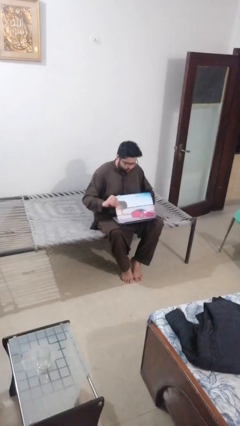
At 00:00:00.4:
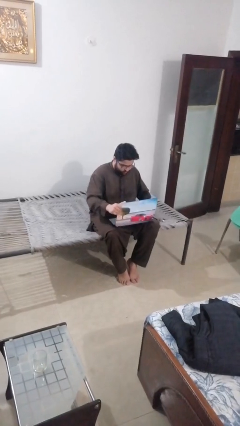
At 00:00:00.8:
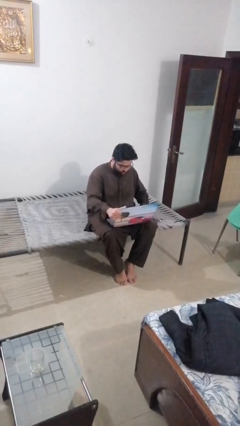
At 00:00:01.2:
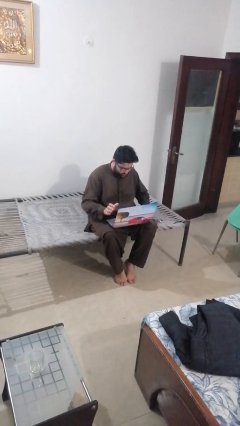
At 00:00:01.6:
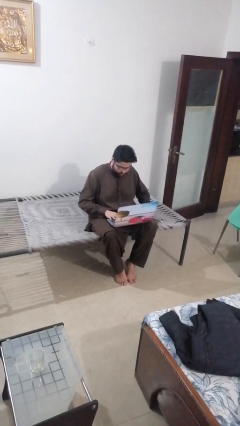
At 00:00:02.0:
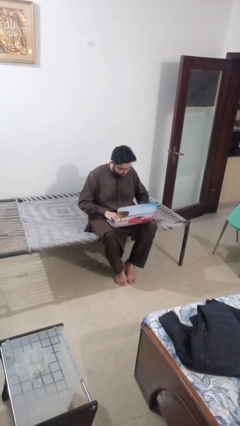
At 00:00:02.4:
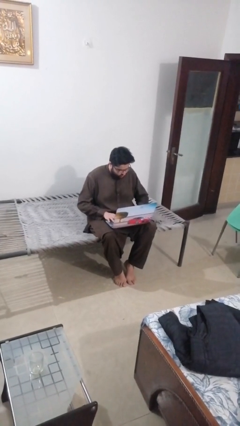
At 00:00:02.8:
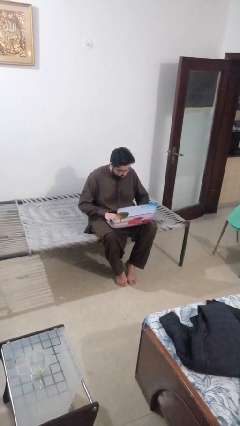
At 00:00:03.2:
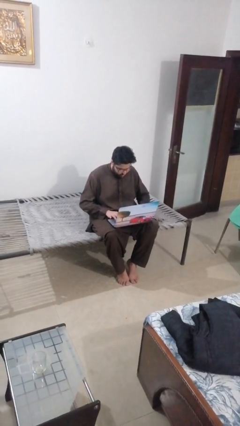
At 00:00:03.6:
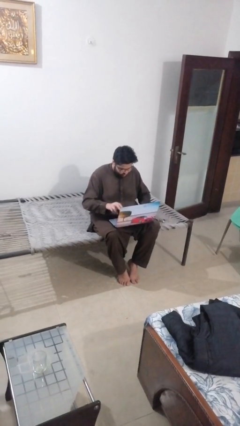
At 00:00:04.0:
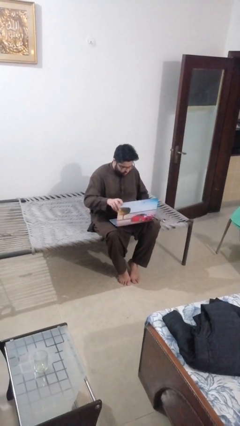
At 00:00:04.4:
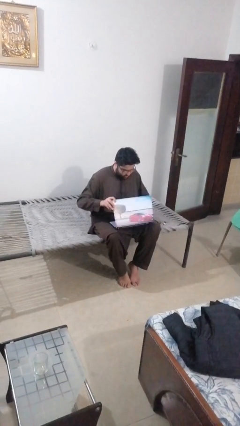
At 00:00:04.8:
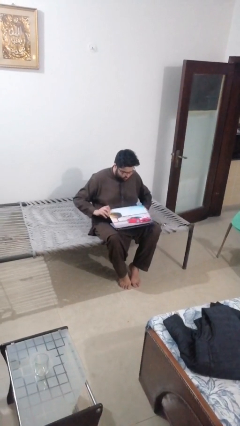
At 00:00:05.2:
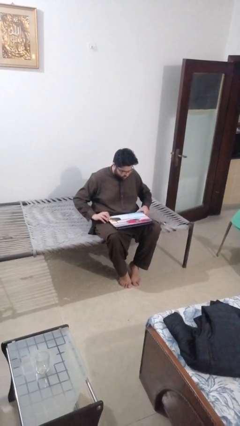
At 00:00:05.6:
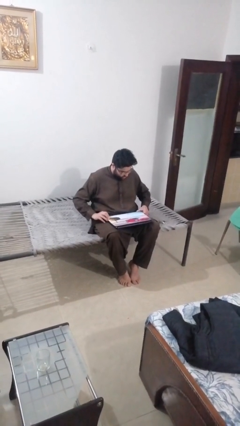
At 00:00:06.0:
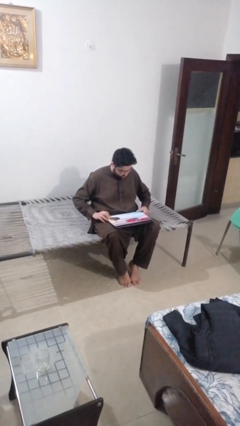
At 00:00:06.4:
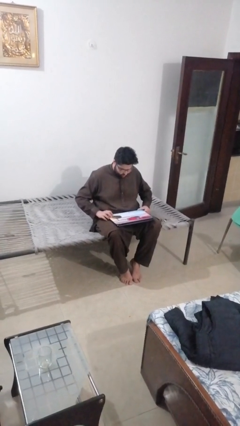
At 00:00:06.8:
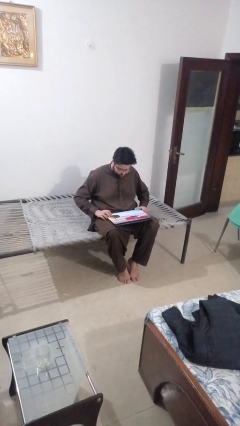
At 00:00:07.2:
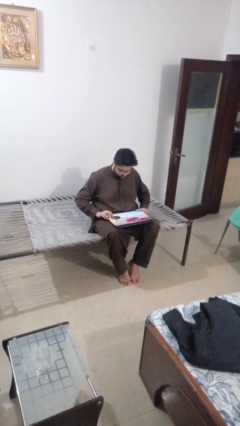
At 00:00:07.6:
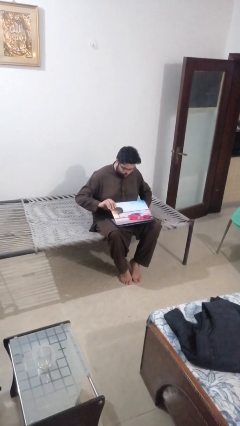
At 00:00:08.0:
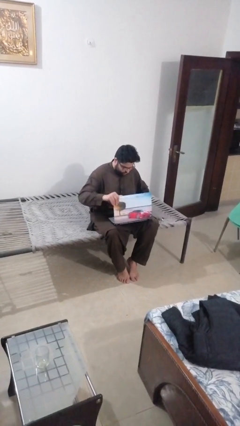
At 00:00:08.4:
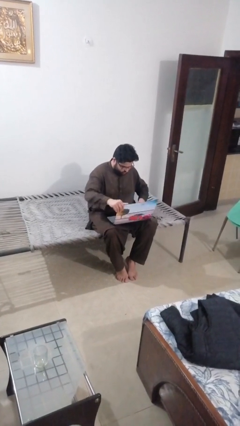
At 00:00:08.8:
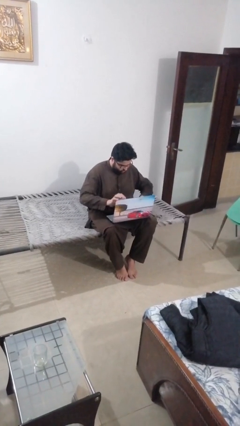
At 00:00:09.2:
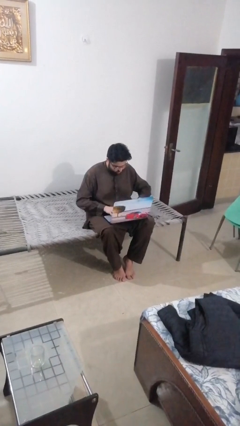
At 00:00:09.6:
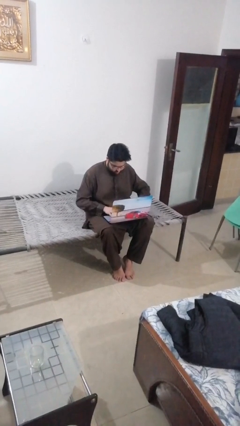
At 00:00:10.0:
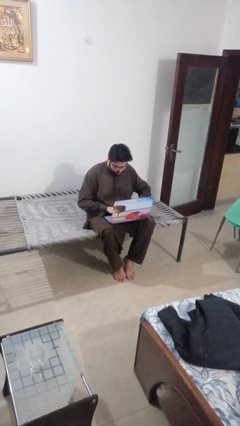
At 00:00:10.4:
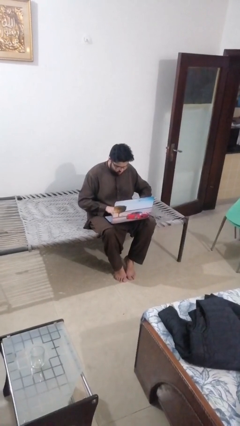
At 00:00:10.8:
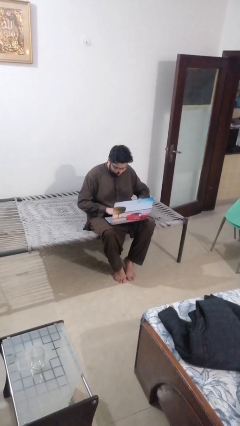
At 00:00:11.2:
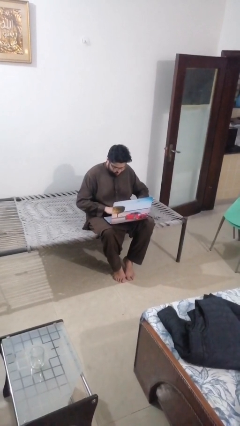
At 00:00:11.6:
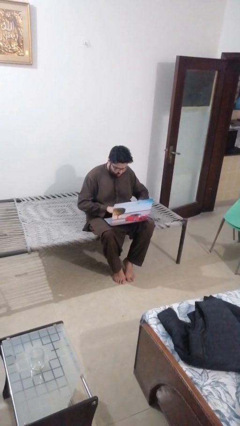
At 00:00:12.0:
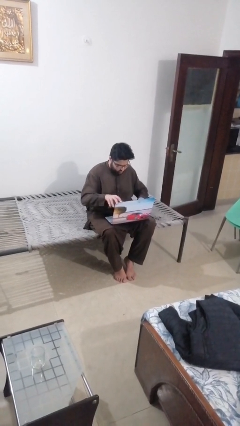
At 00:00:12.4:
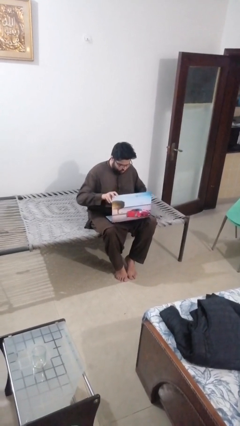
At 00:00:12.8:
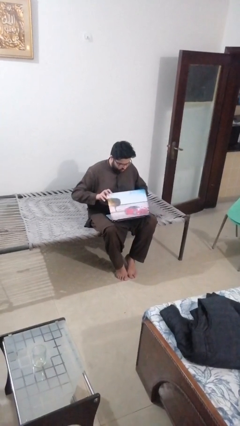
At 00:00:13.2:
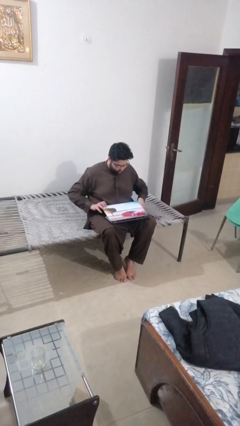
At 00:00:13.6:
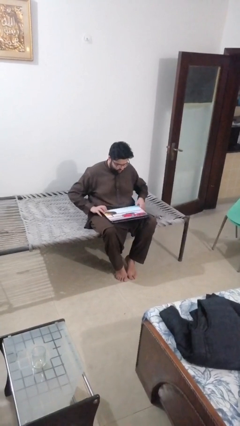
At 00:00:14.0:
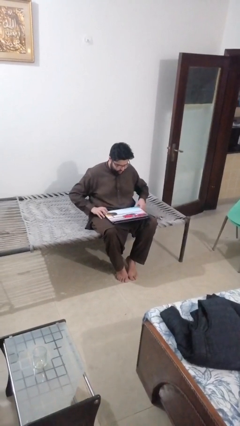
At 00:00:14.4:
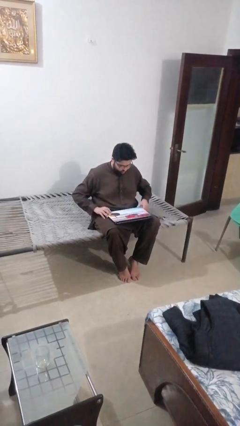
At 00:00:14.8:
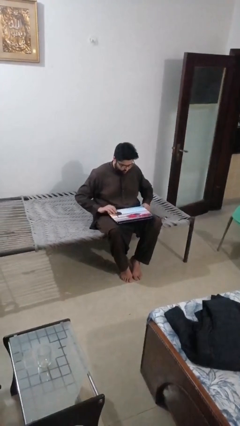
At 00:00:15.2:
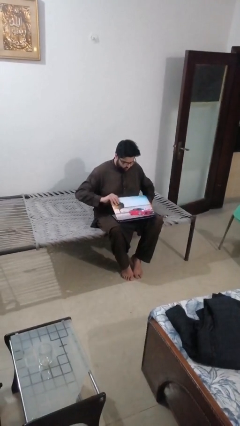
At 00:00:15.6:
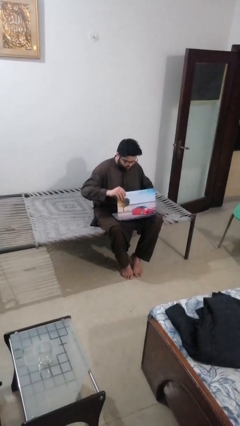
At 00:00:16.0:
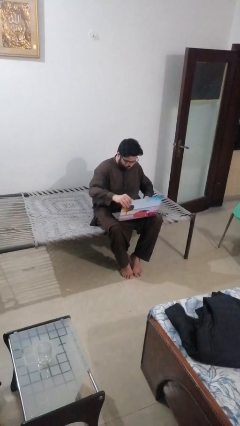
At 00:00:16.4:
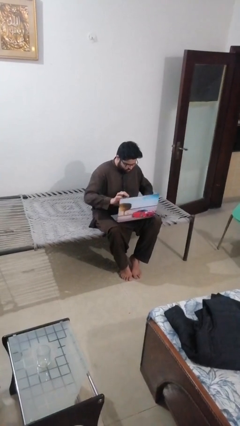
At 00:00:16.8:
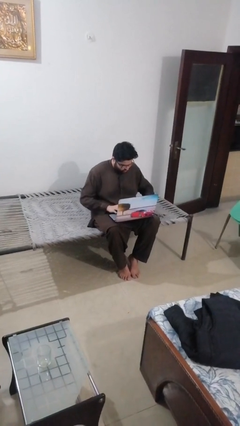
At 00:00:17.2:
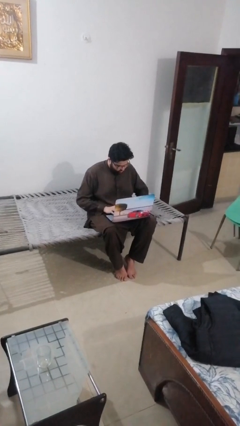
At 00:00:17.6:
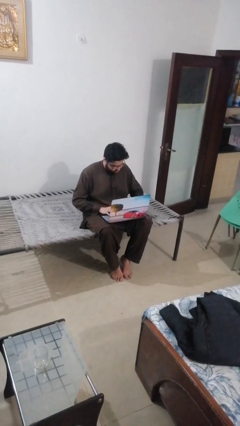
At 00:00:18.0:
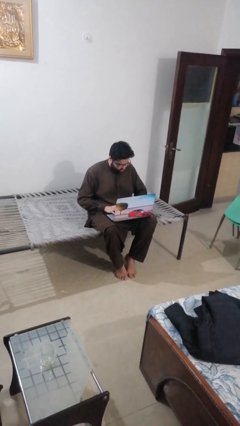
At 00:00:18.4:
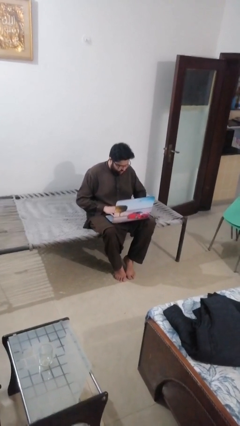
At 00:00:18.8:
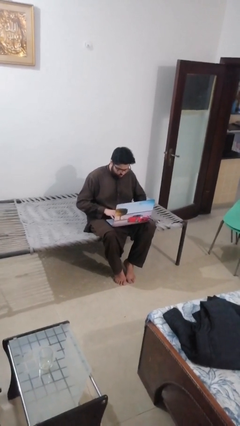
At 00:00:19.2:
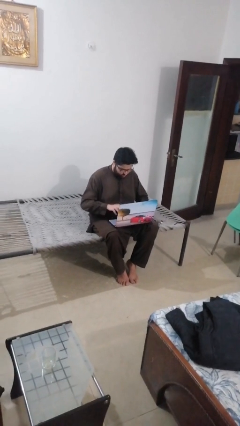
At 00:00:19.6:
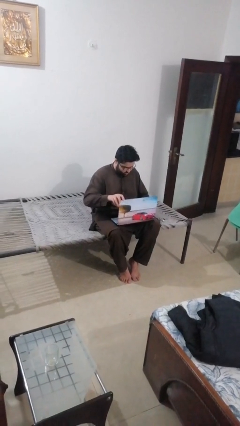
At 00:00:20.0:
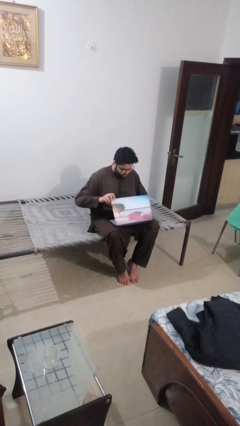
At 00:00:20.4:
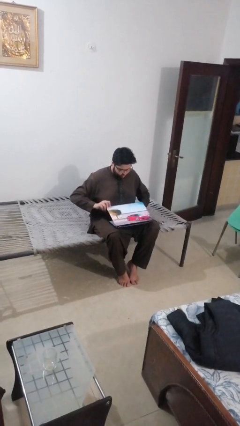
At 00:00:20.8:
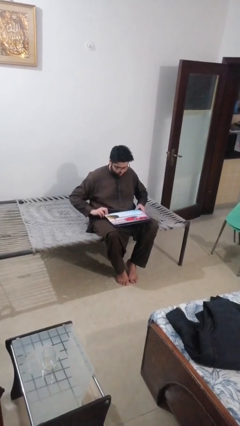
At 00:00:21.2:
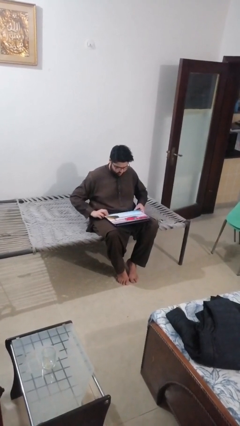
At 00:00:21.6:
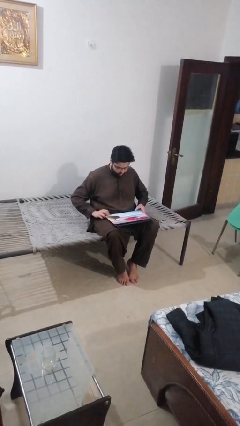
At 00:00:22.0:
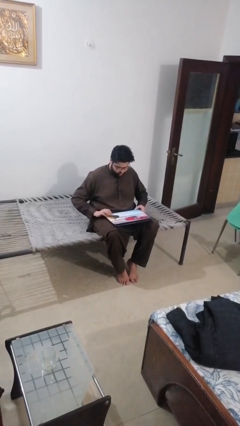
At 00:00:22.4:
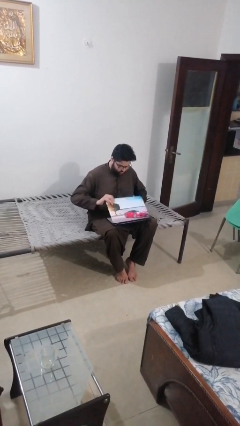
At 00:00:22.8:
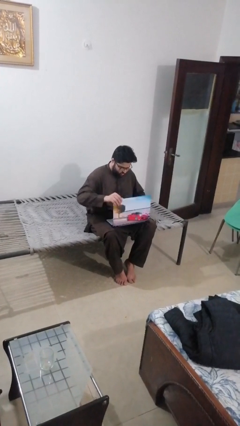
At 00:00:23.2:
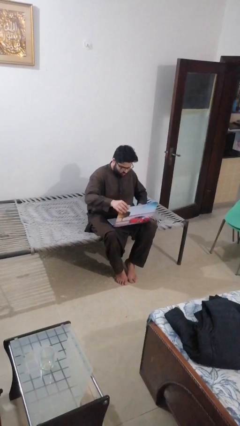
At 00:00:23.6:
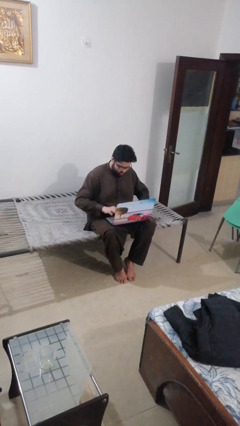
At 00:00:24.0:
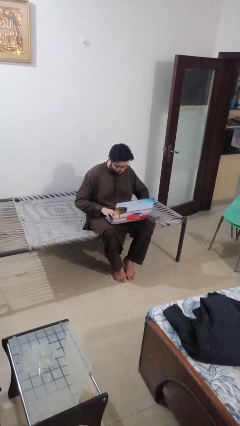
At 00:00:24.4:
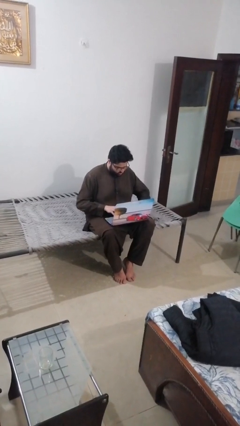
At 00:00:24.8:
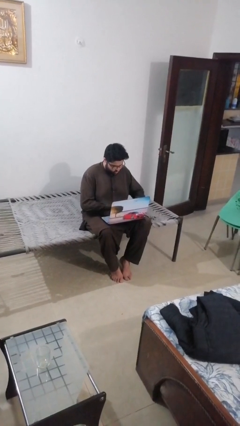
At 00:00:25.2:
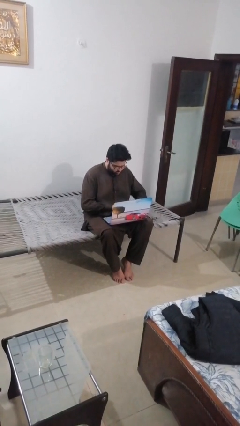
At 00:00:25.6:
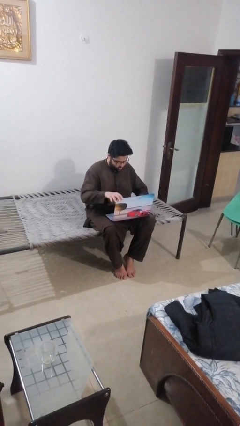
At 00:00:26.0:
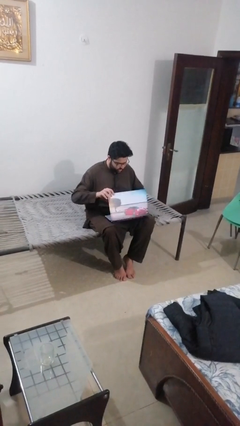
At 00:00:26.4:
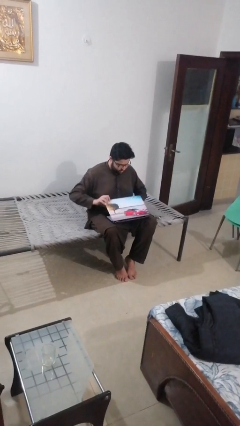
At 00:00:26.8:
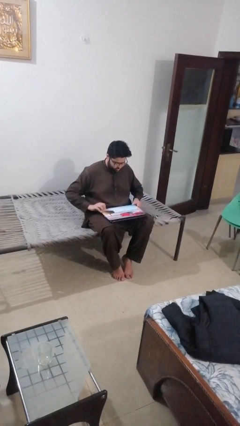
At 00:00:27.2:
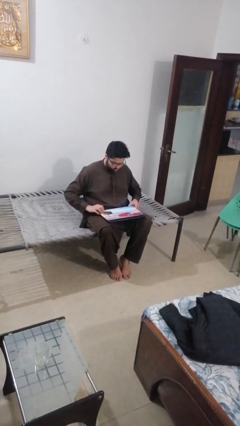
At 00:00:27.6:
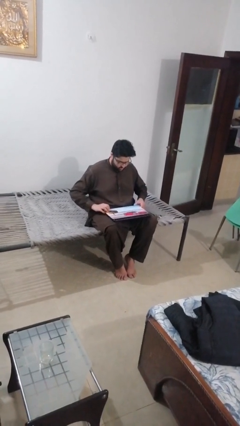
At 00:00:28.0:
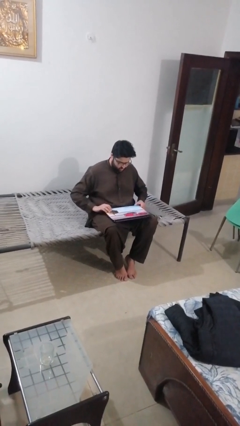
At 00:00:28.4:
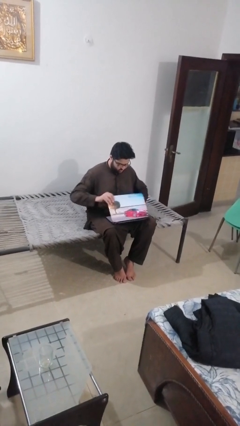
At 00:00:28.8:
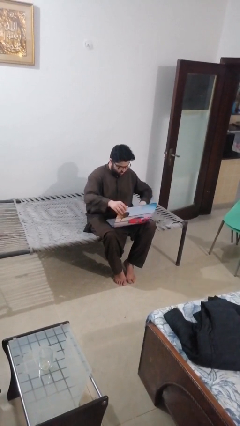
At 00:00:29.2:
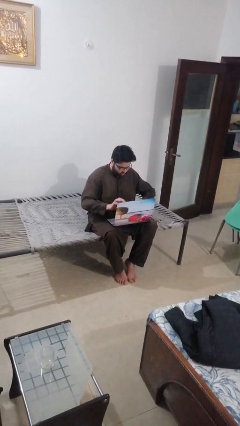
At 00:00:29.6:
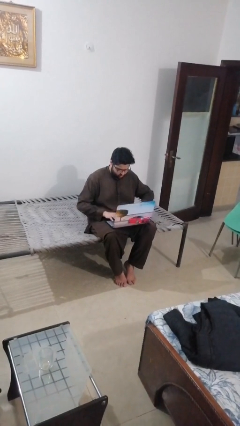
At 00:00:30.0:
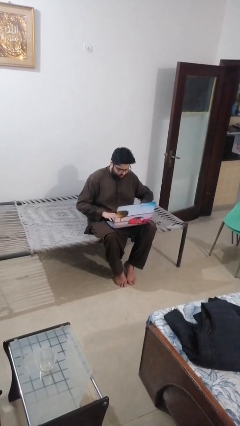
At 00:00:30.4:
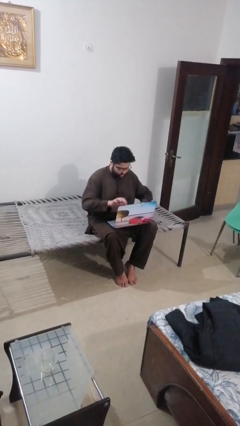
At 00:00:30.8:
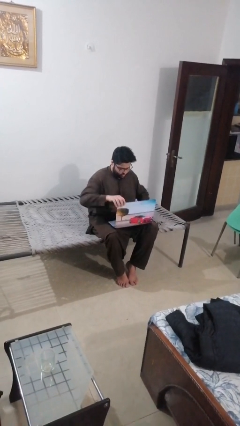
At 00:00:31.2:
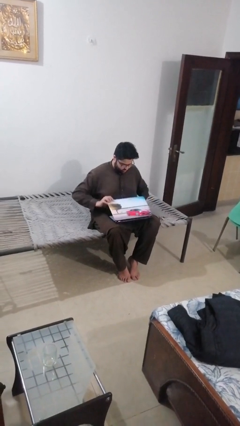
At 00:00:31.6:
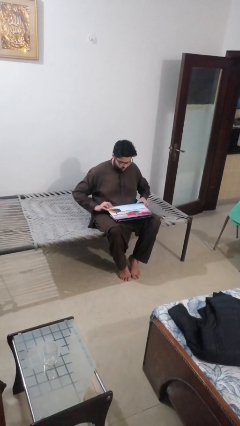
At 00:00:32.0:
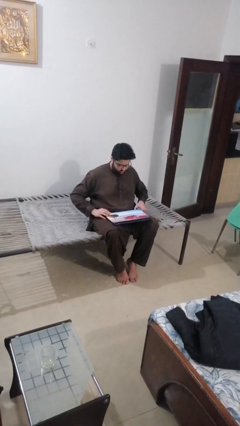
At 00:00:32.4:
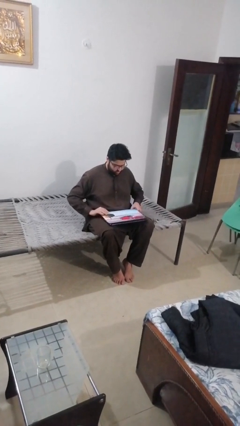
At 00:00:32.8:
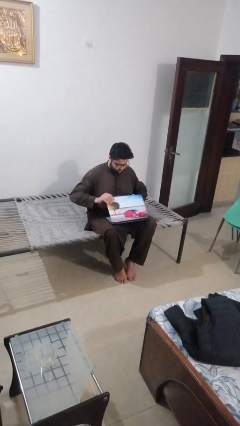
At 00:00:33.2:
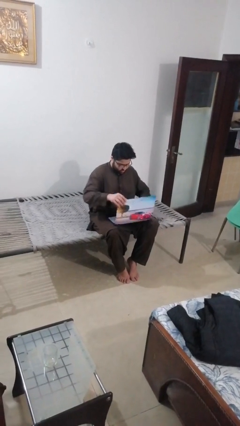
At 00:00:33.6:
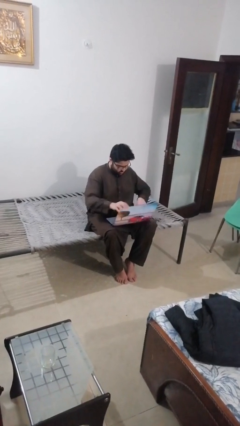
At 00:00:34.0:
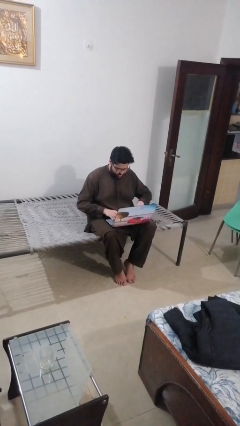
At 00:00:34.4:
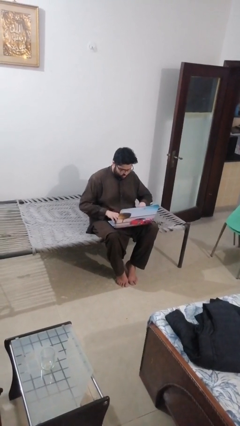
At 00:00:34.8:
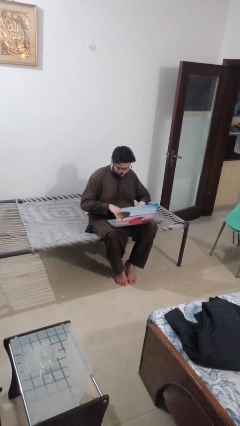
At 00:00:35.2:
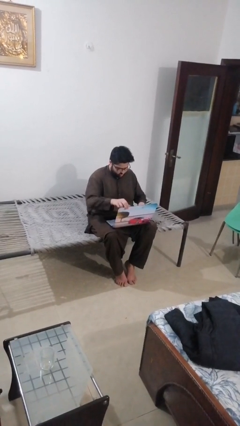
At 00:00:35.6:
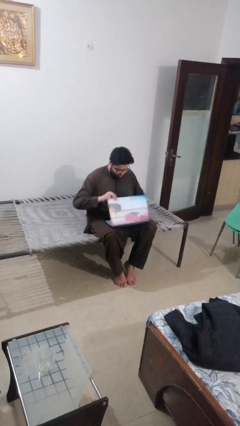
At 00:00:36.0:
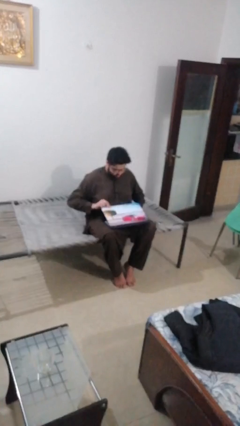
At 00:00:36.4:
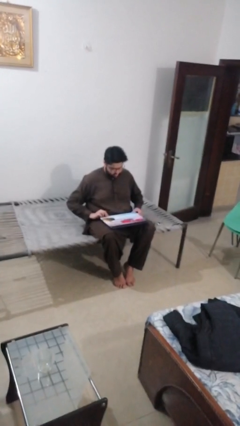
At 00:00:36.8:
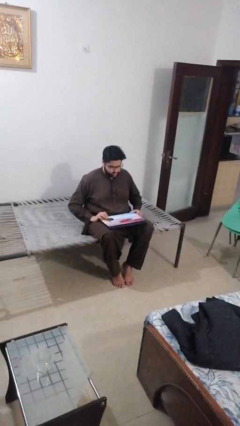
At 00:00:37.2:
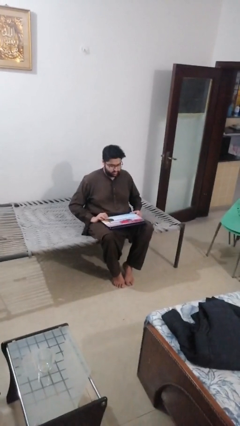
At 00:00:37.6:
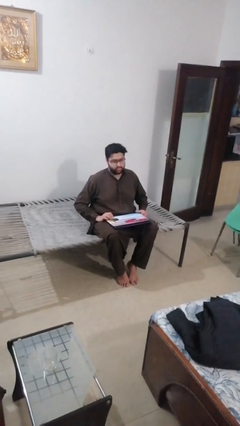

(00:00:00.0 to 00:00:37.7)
person interacts with laptop
